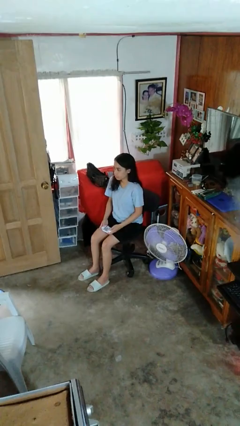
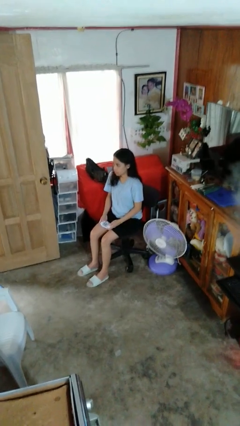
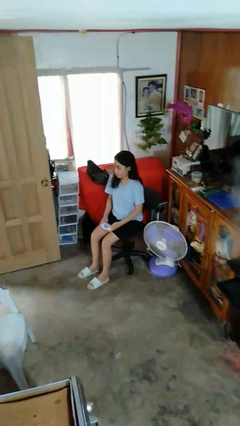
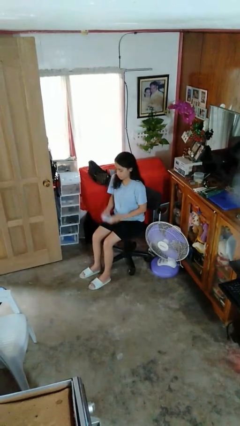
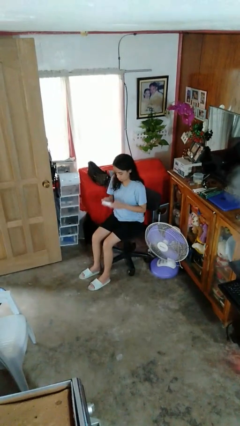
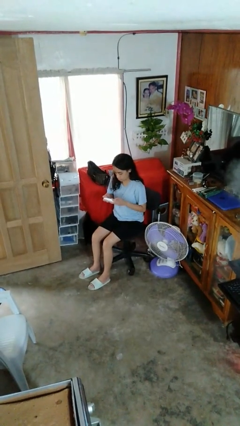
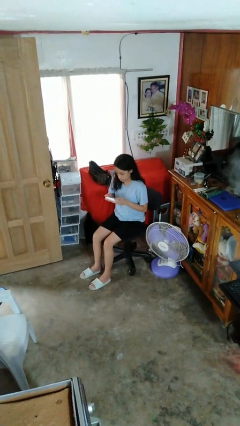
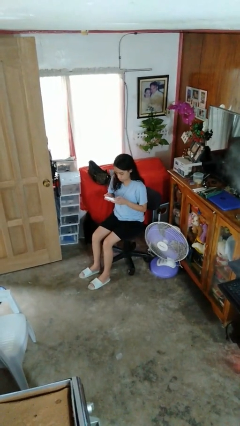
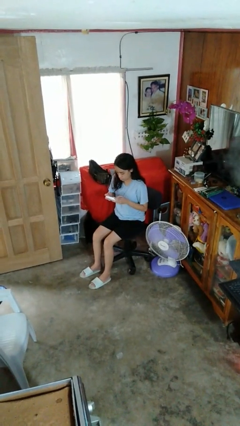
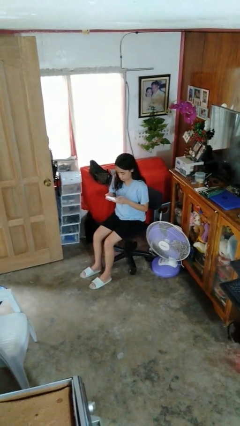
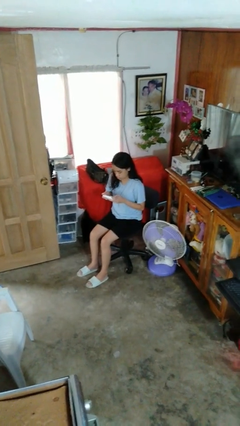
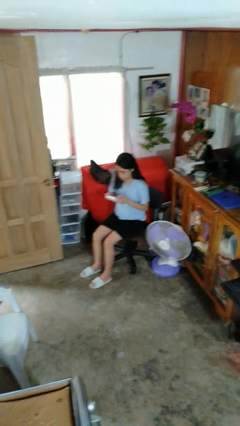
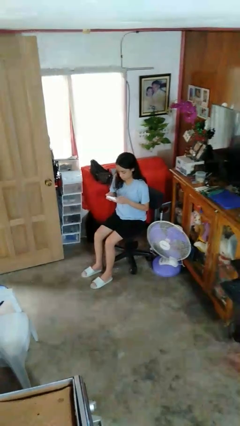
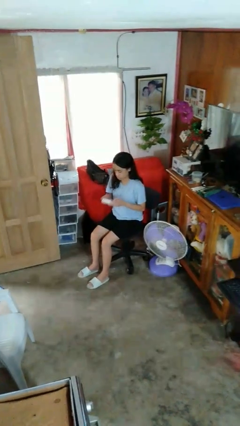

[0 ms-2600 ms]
person interacts with handheld game

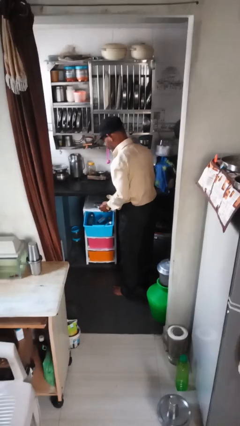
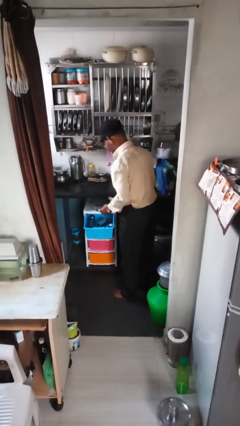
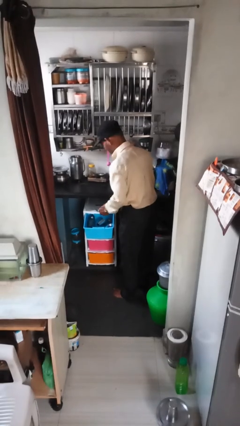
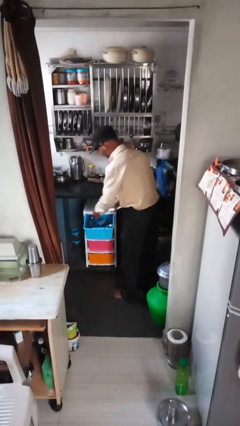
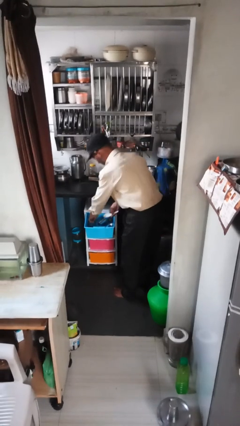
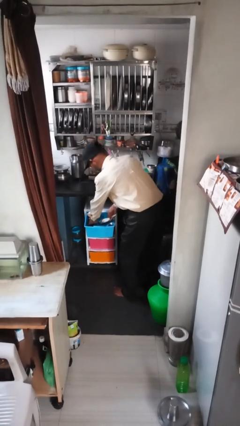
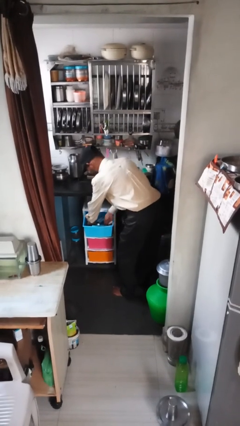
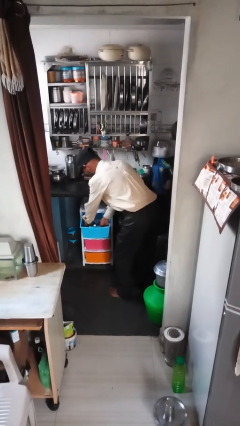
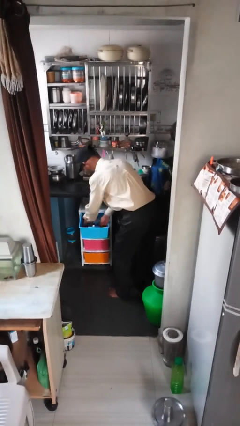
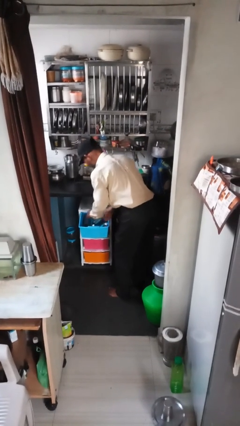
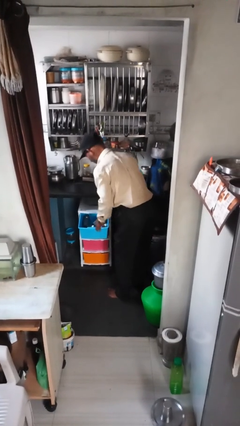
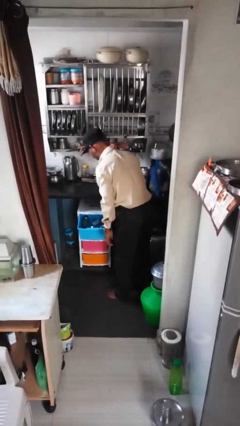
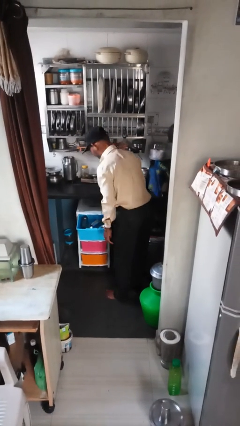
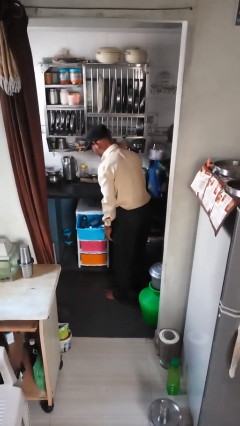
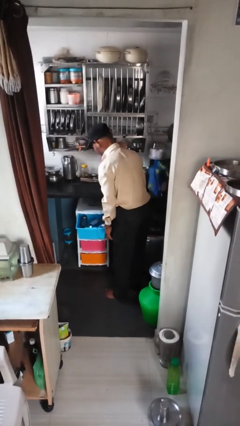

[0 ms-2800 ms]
person puts object into kitchen drawer

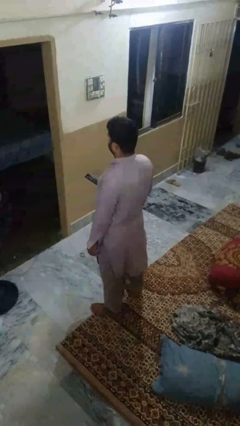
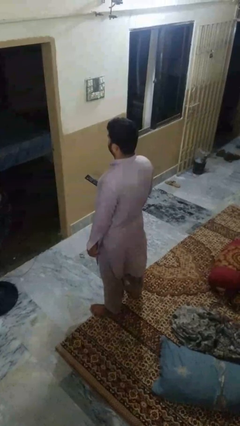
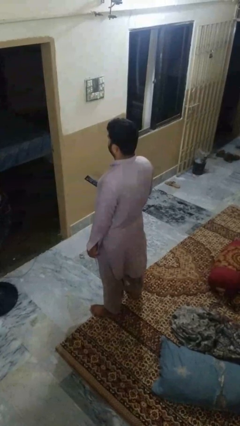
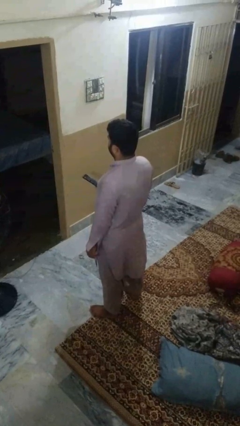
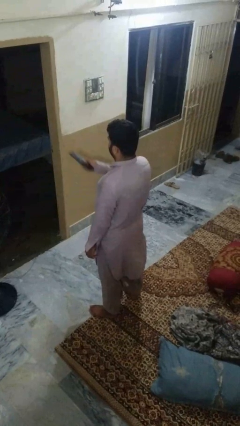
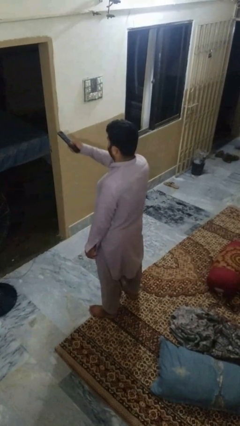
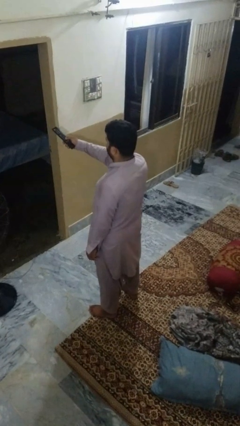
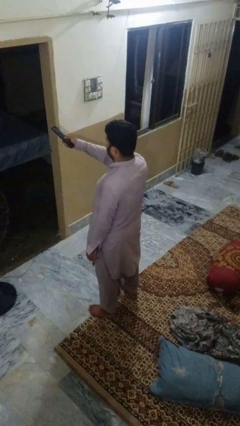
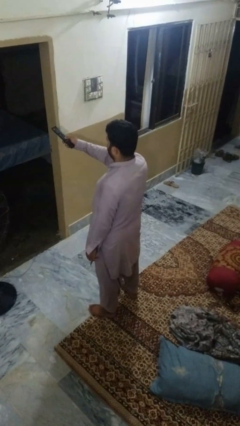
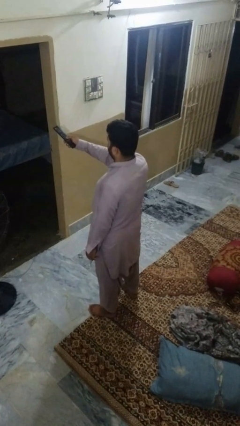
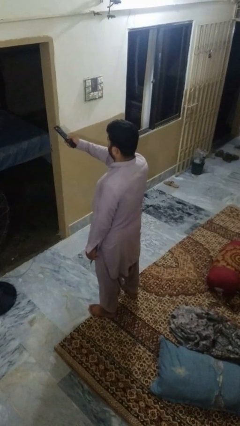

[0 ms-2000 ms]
person uses television remote

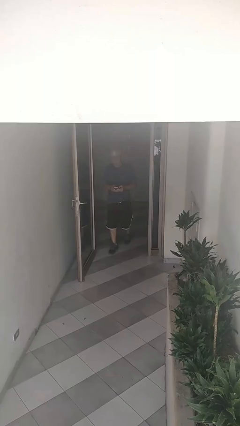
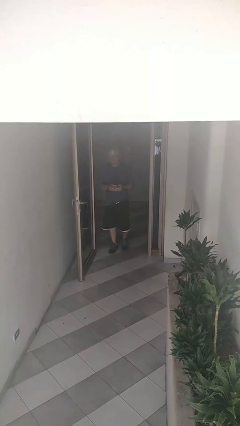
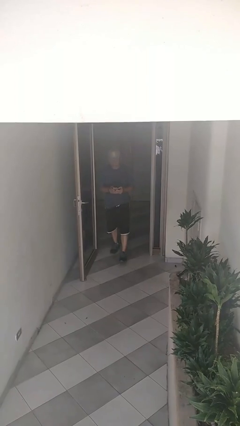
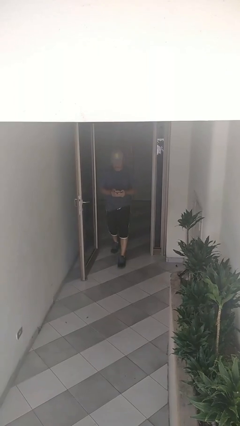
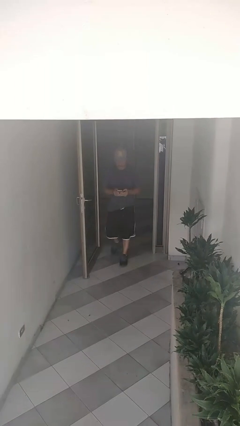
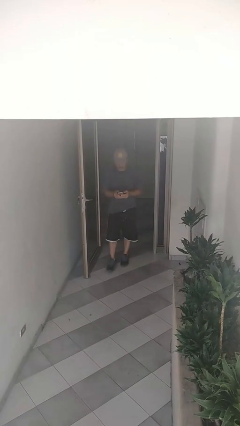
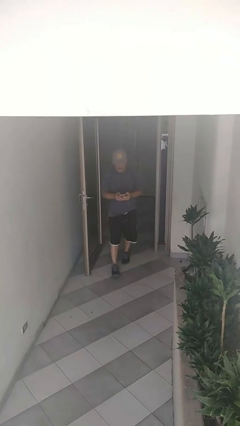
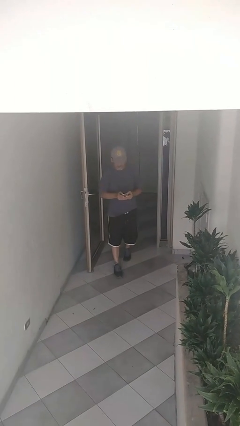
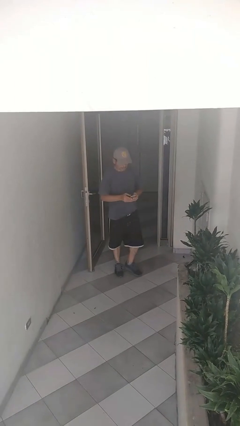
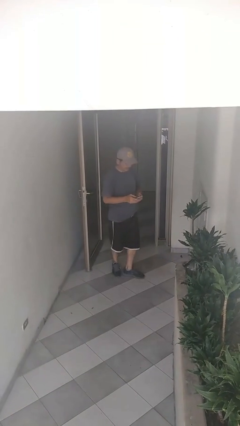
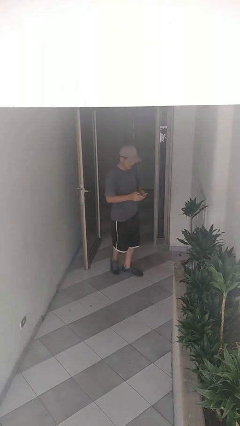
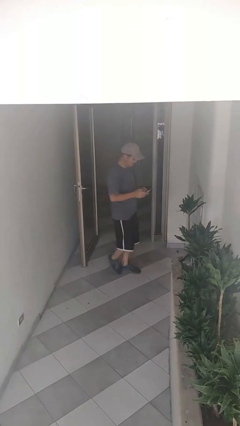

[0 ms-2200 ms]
person enters scene through structure

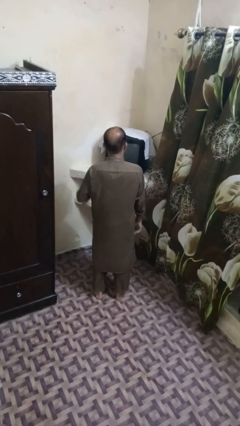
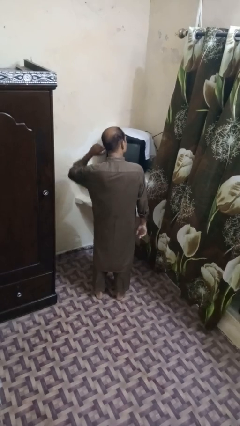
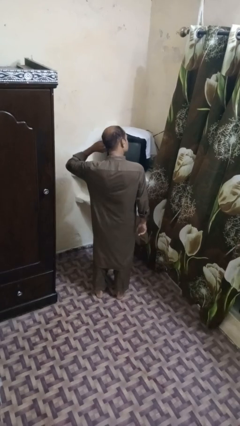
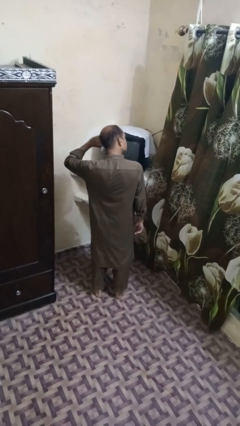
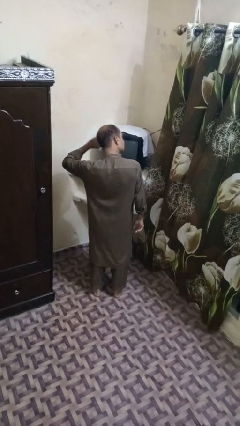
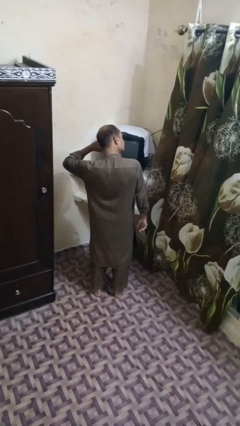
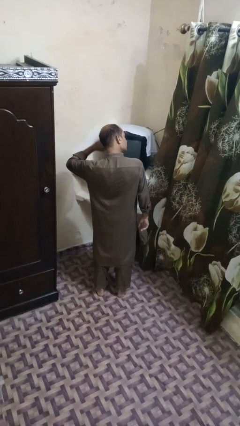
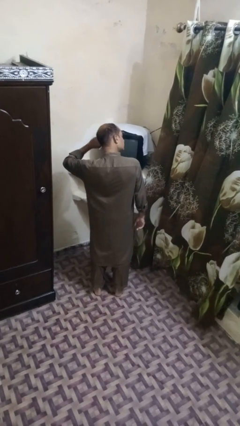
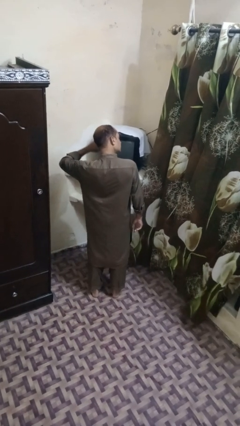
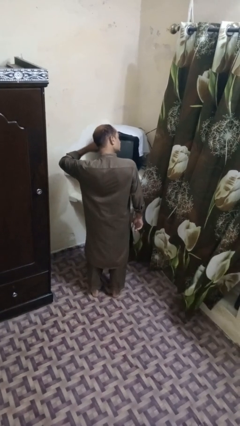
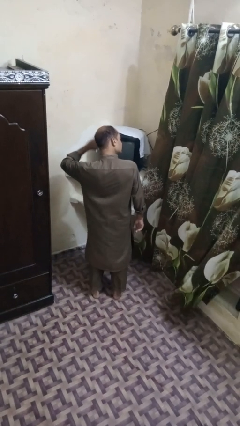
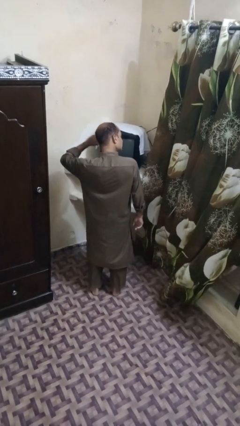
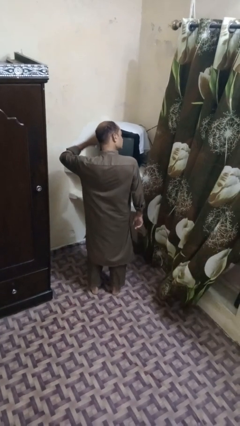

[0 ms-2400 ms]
person puts fingers in ear

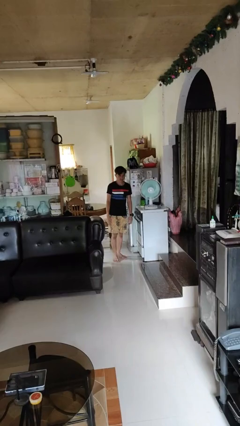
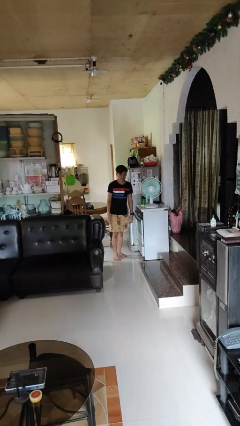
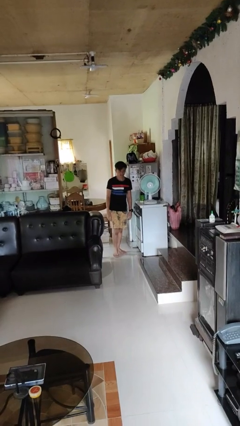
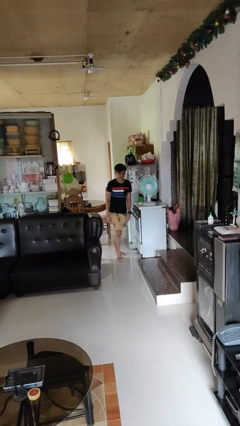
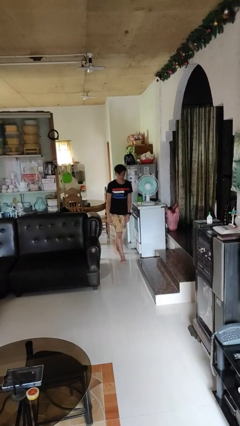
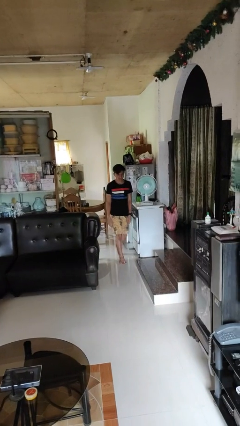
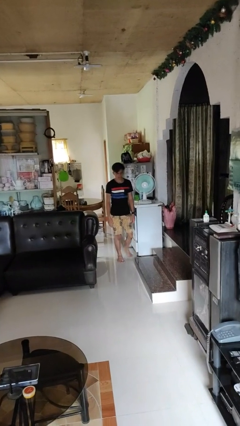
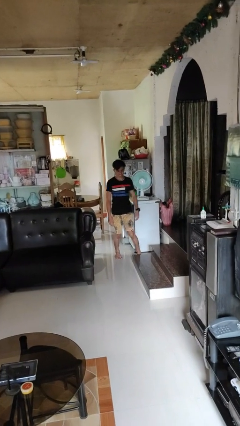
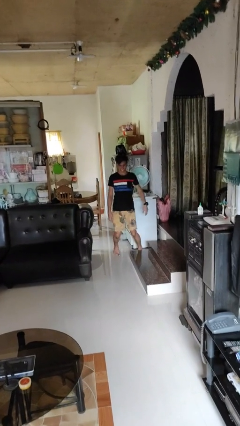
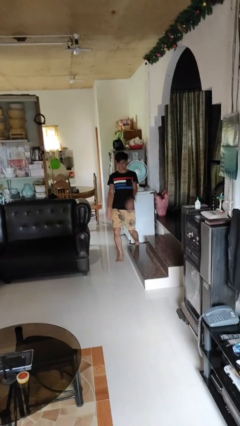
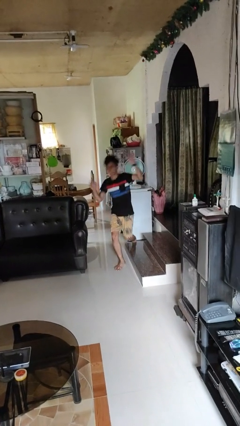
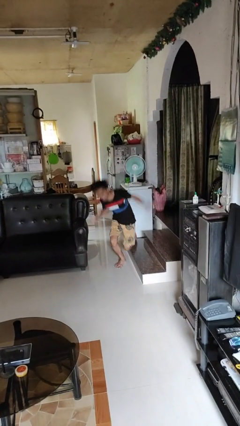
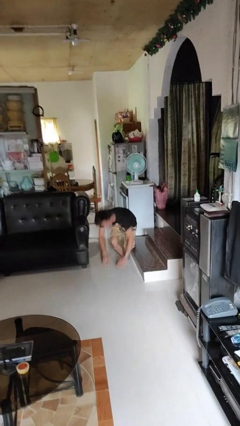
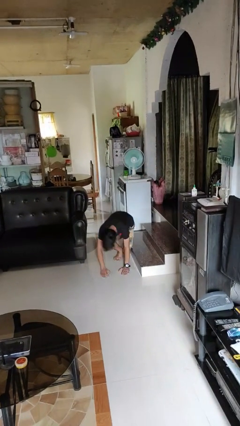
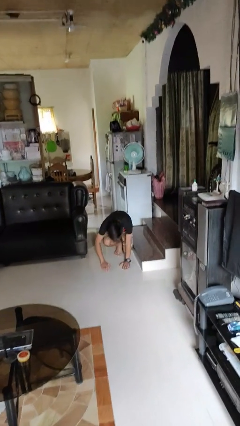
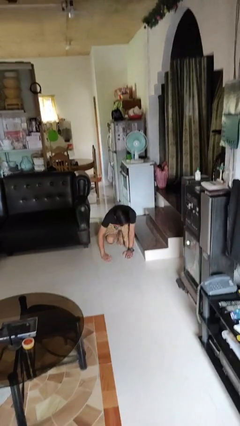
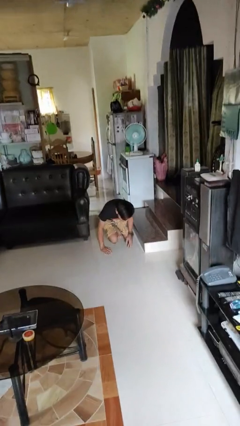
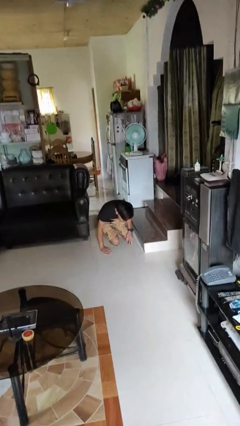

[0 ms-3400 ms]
person trips on object on floor

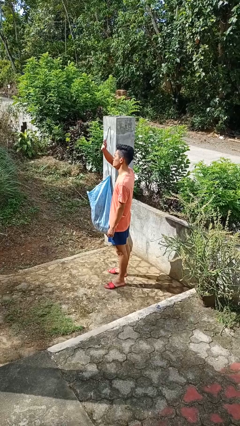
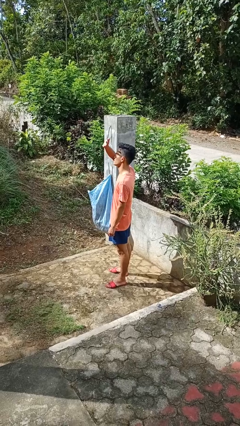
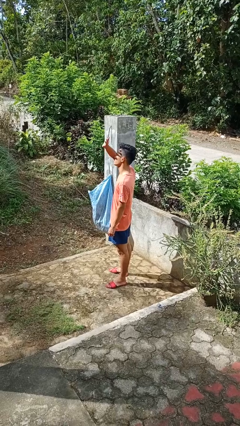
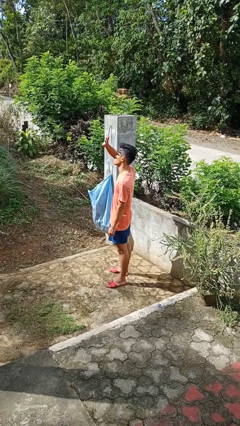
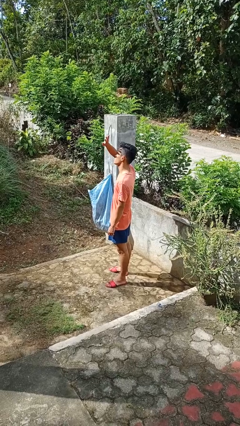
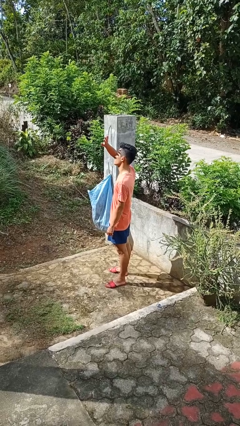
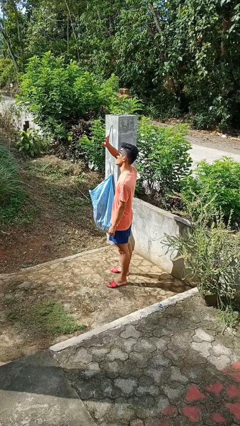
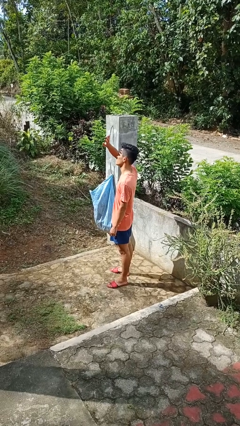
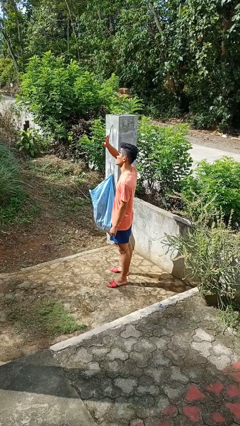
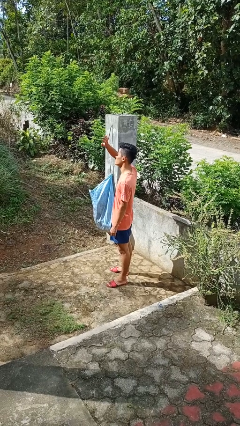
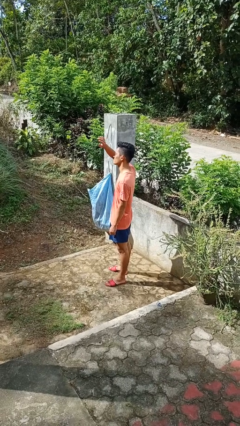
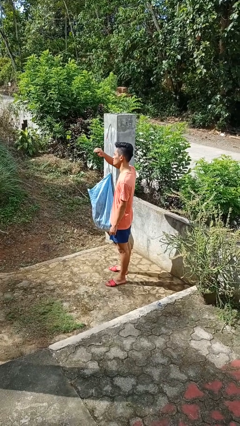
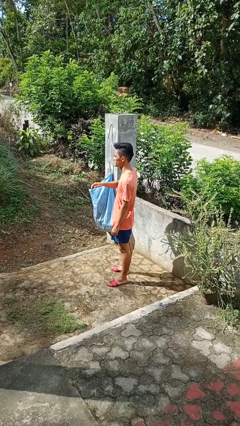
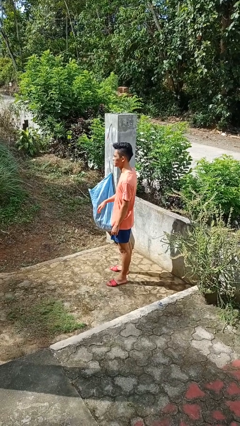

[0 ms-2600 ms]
person shades eyes
